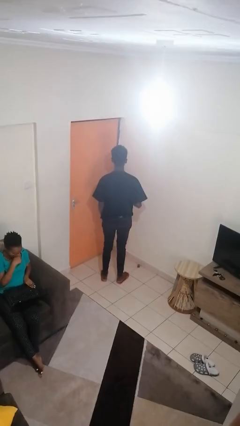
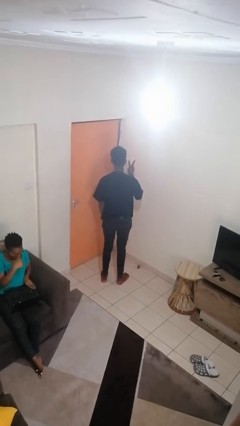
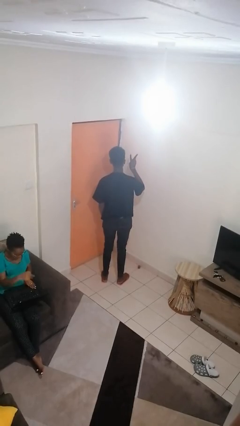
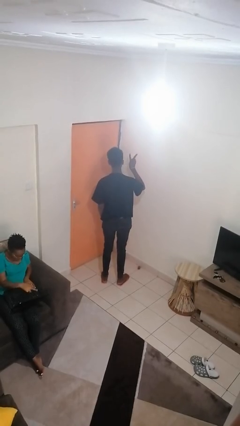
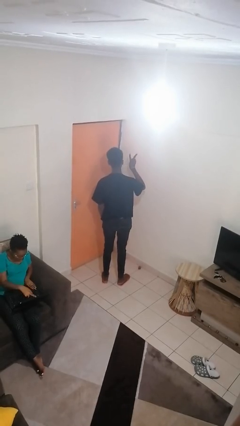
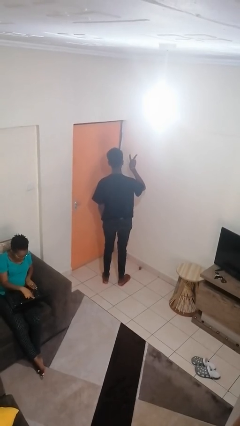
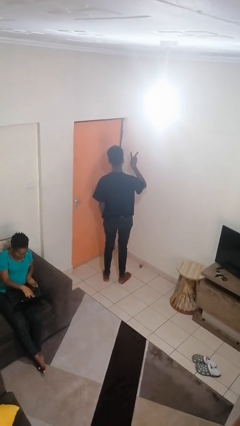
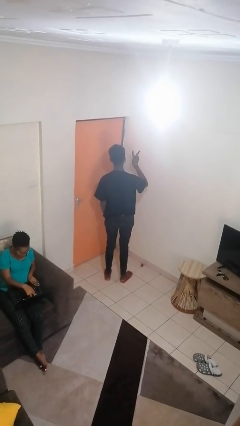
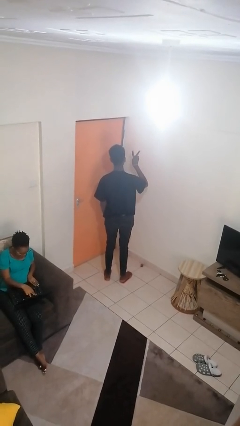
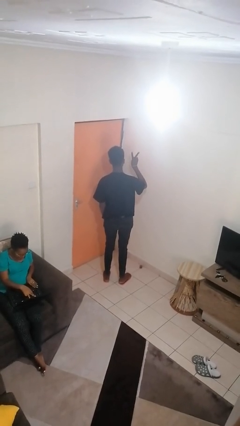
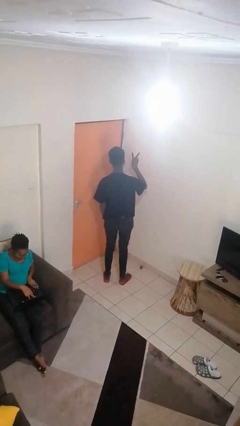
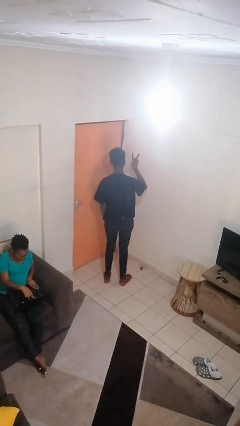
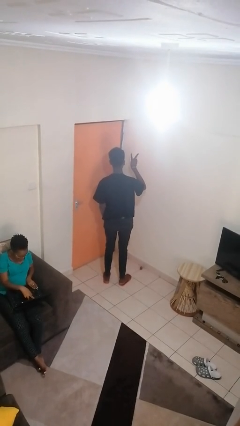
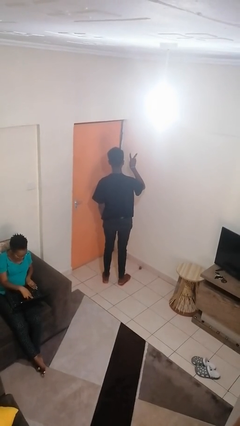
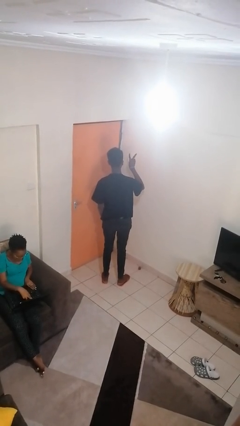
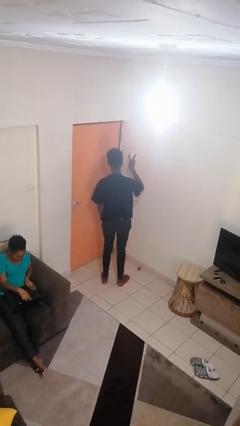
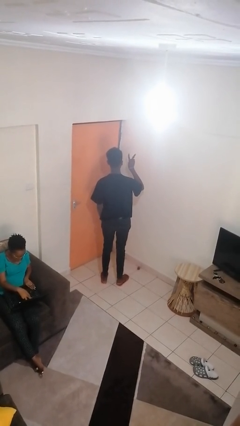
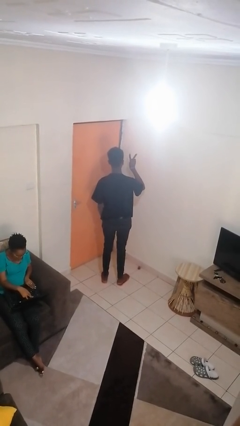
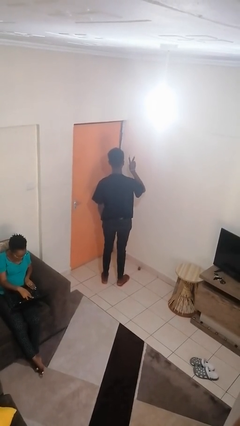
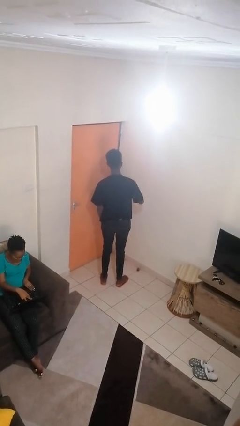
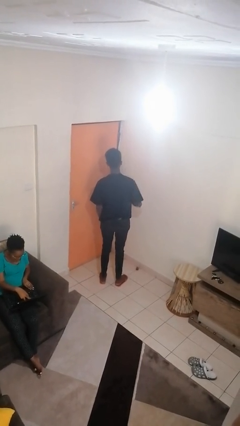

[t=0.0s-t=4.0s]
person gestures peace

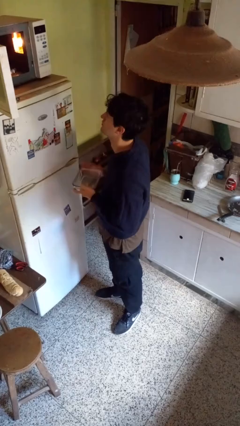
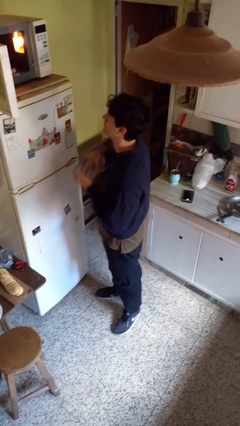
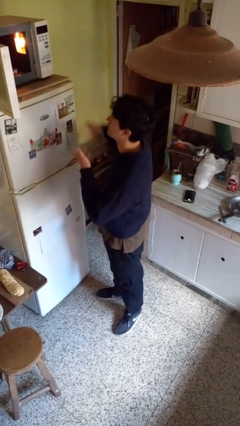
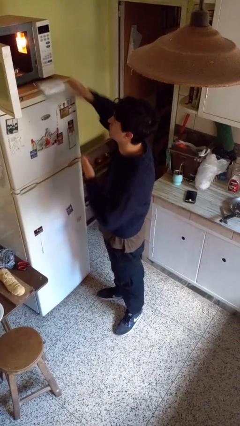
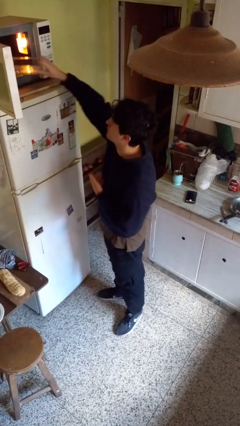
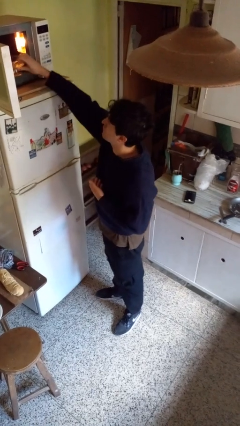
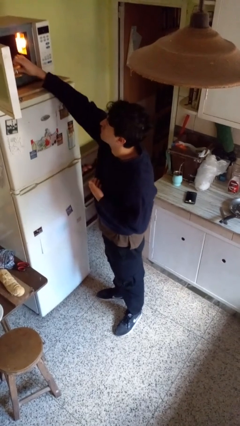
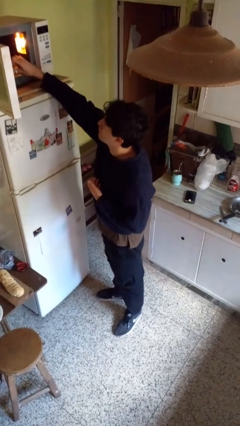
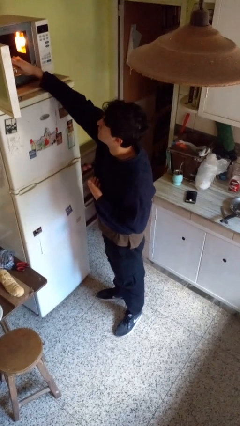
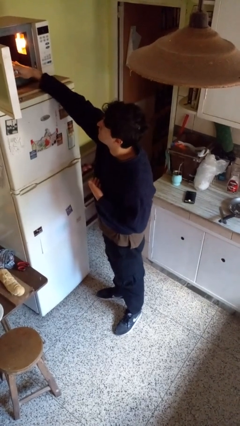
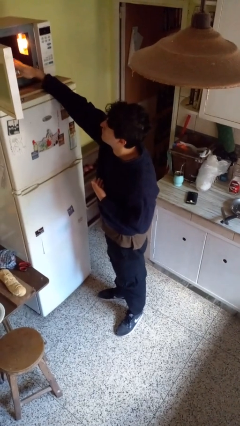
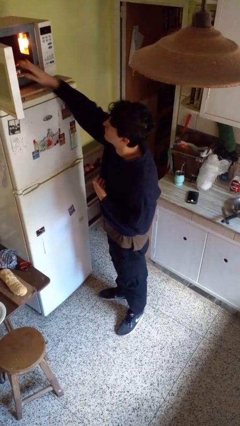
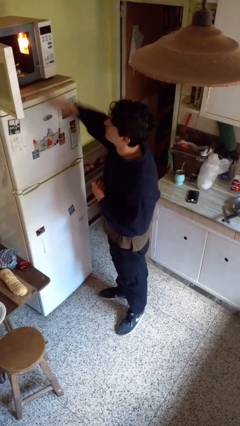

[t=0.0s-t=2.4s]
person puts object into microwave

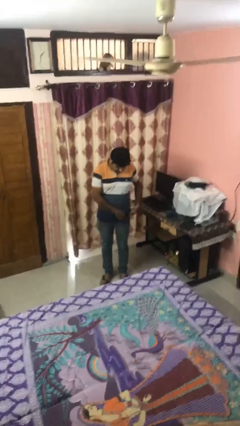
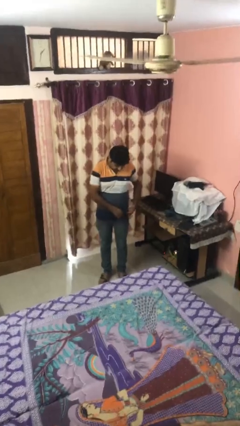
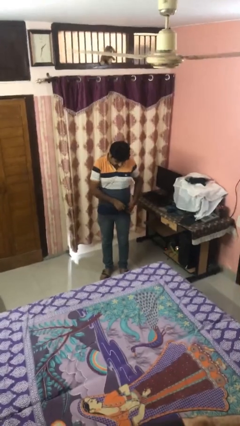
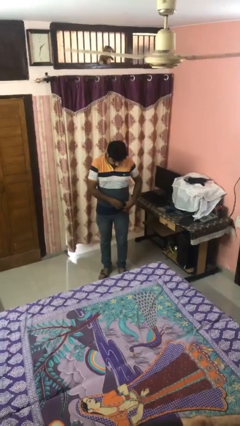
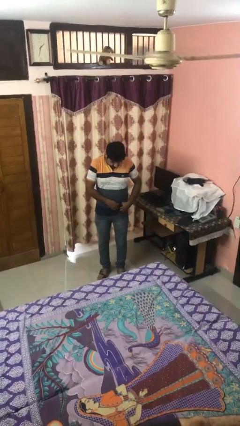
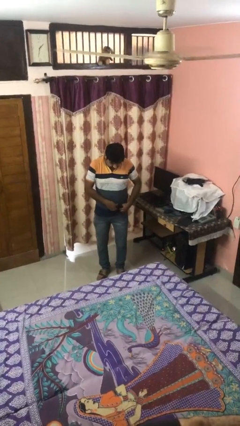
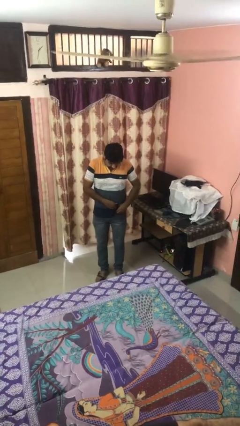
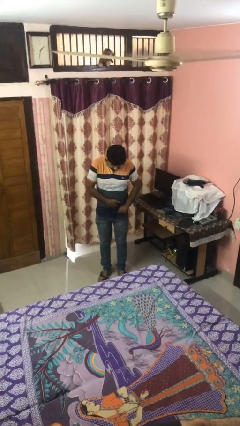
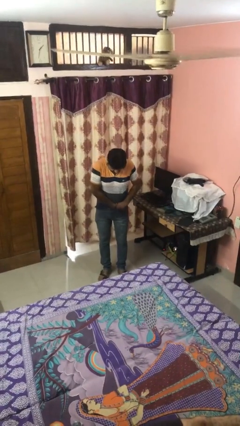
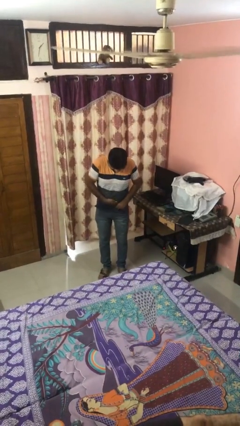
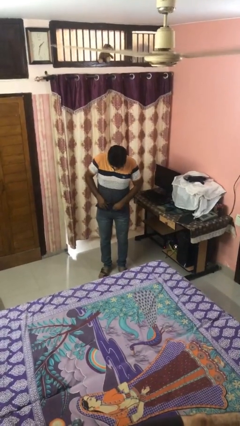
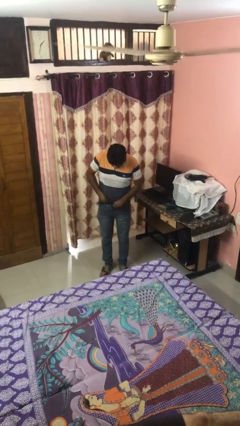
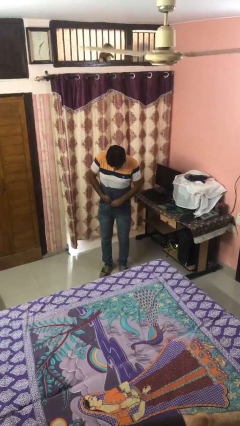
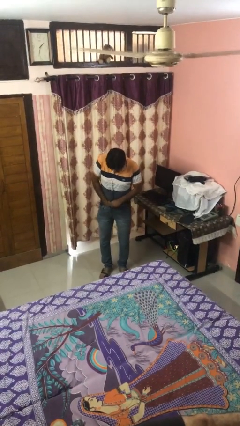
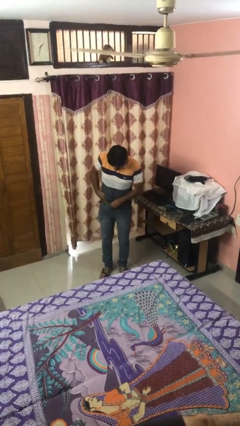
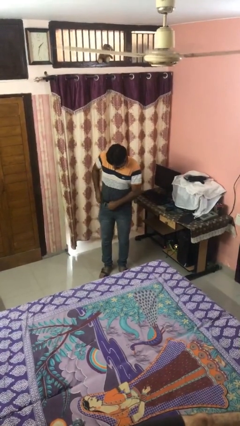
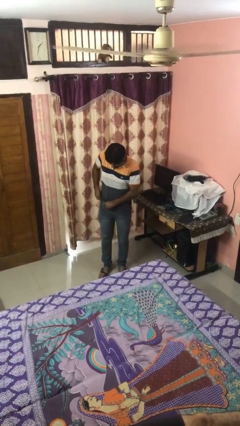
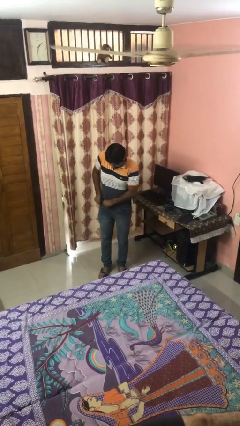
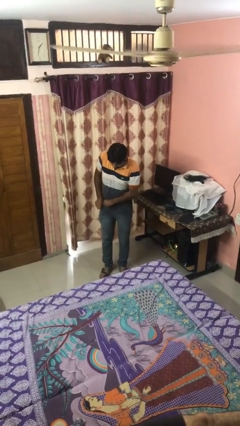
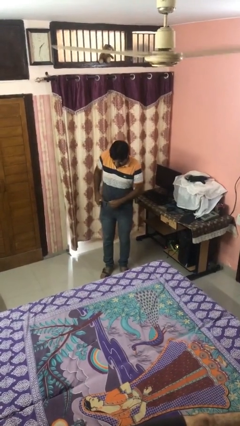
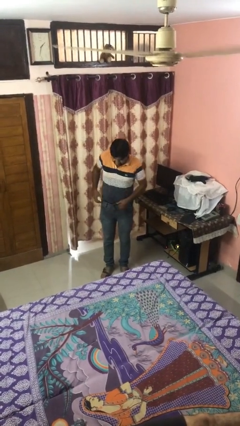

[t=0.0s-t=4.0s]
person tucks in shirt

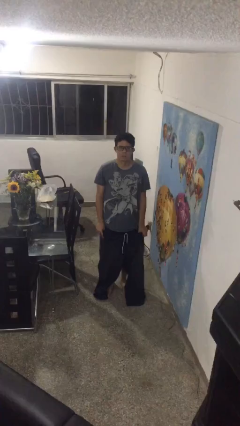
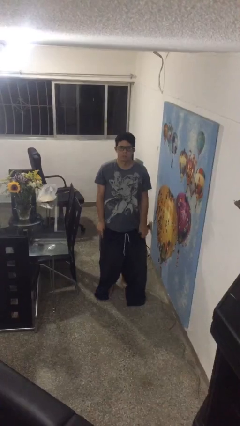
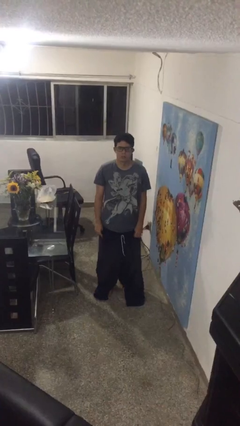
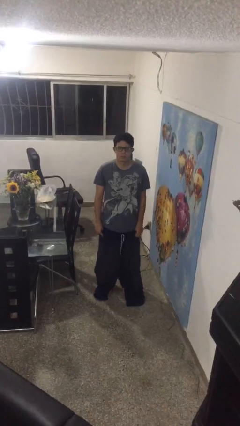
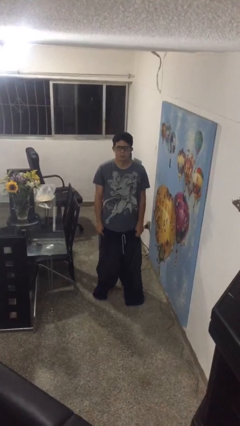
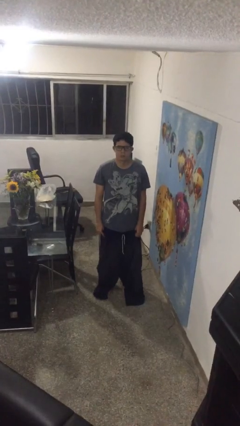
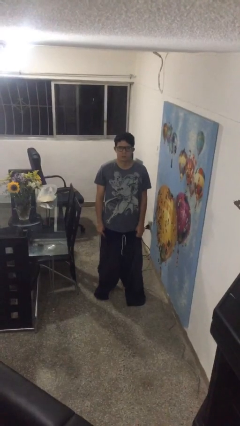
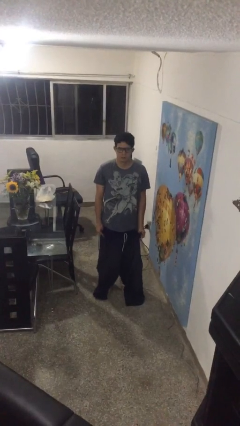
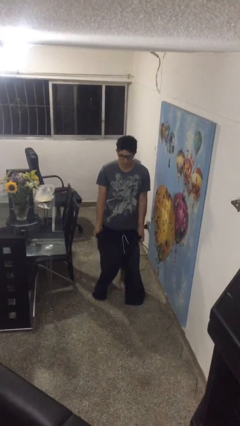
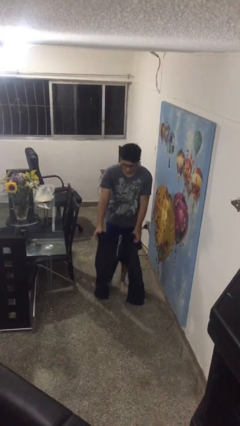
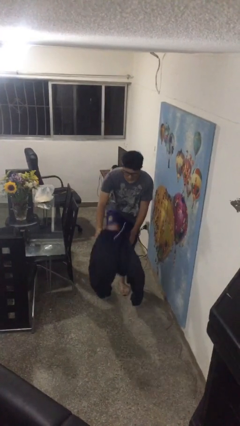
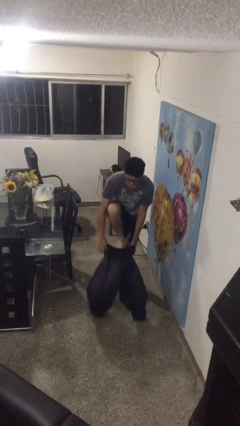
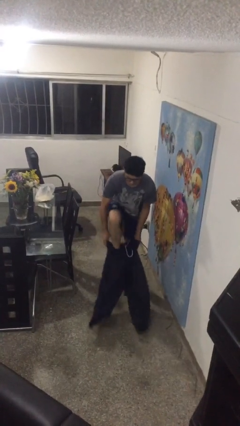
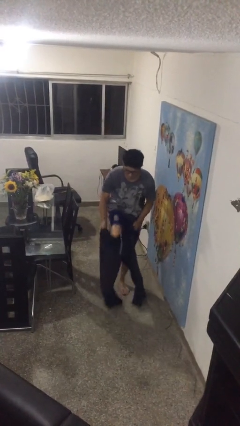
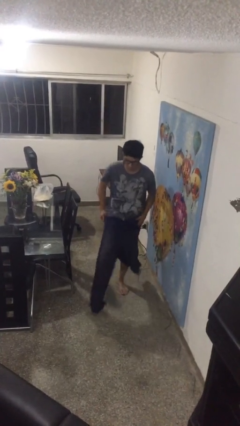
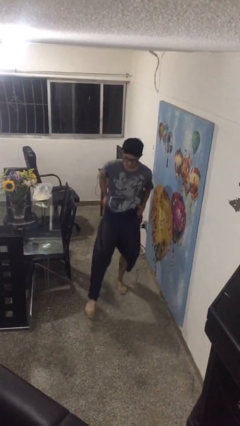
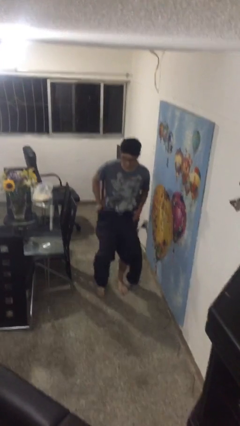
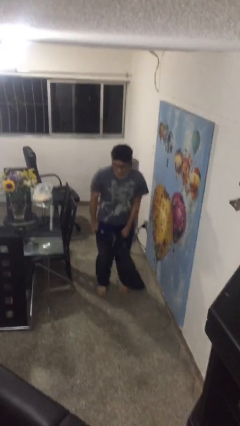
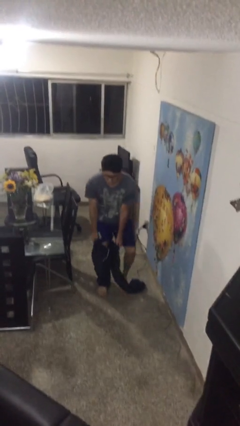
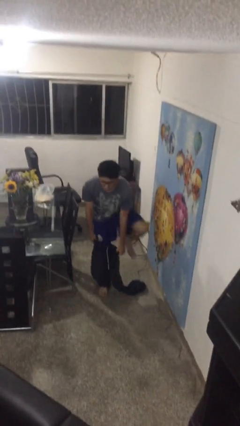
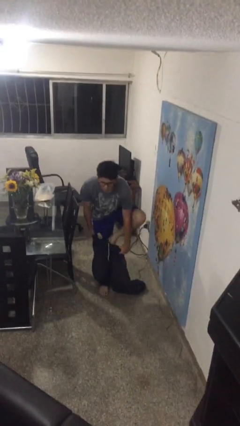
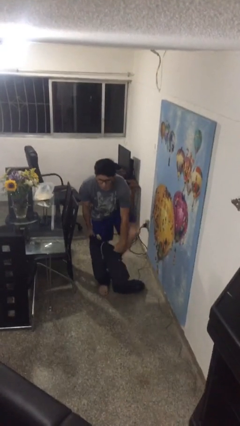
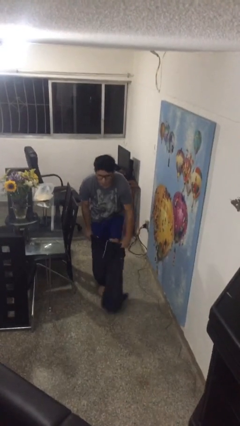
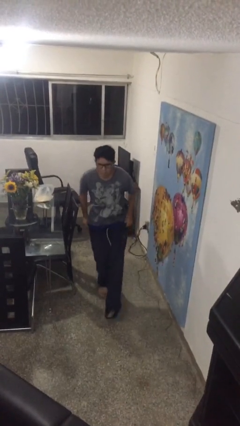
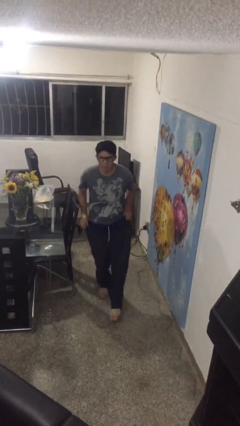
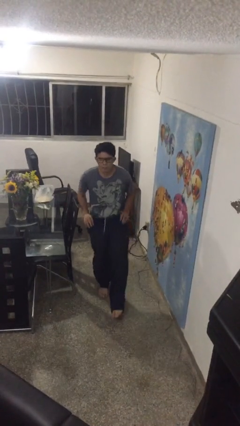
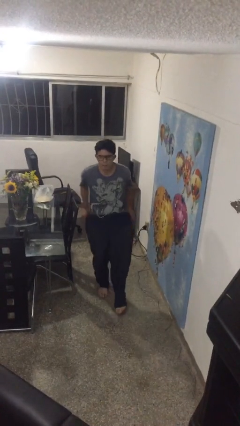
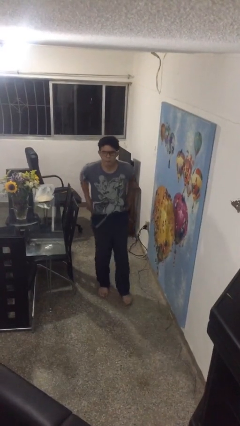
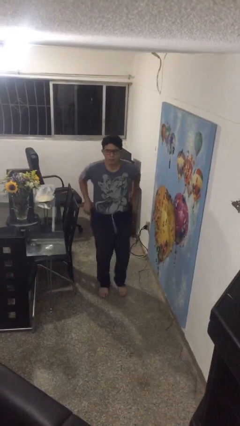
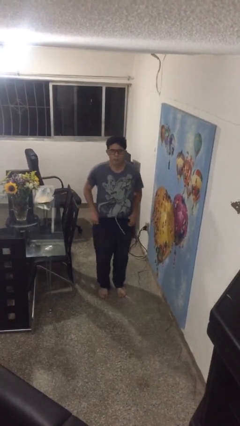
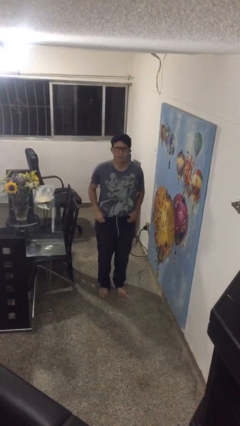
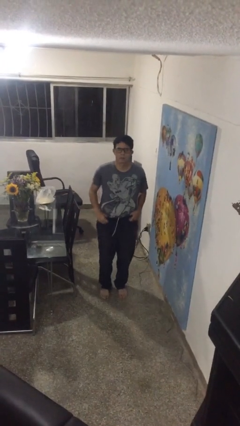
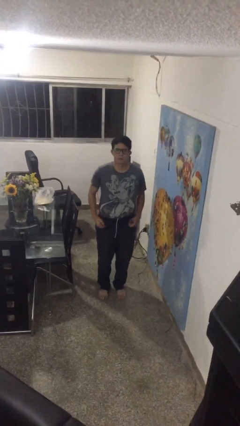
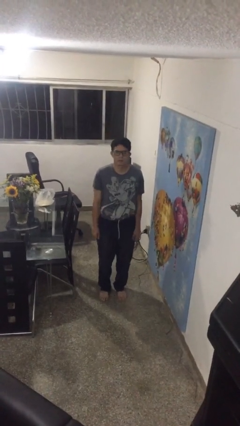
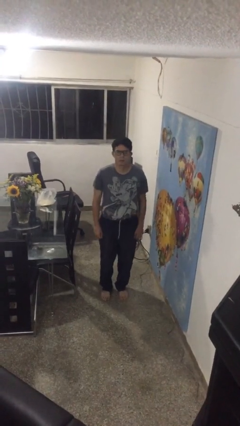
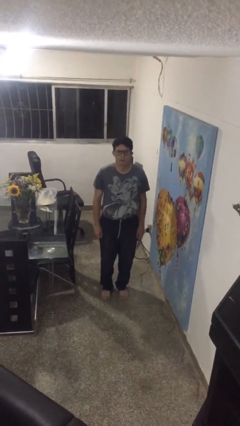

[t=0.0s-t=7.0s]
person puts on pants
